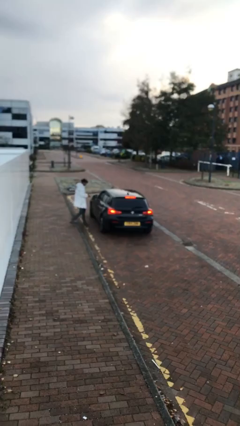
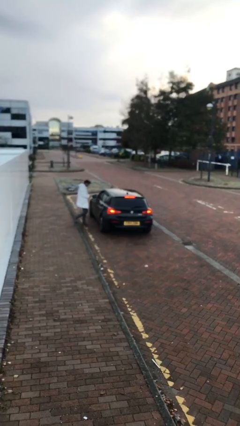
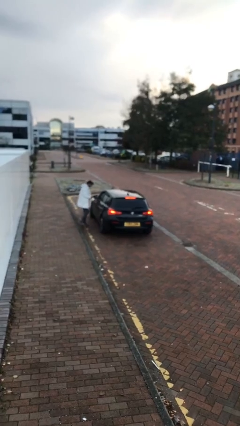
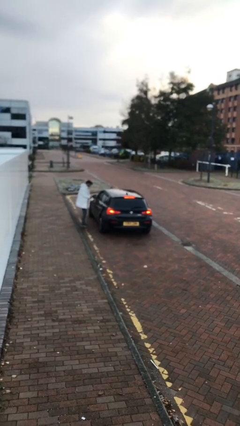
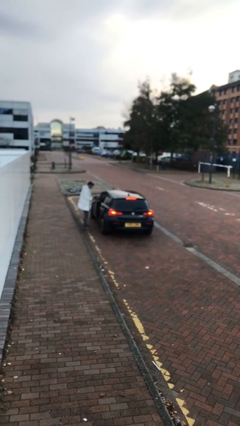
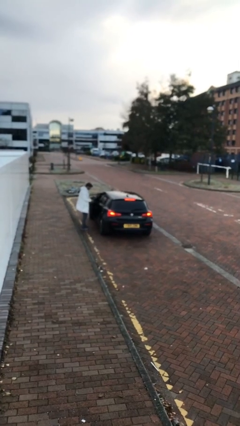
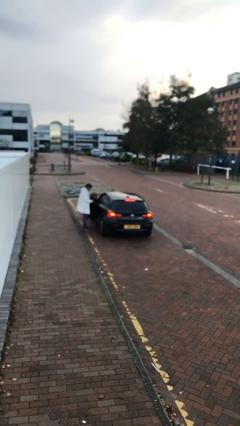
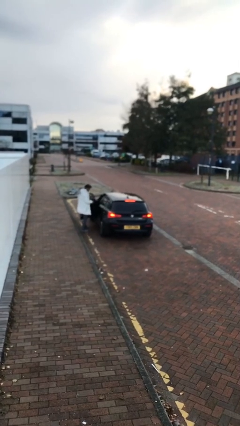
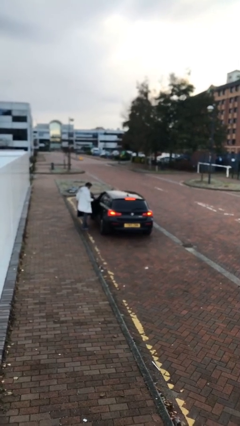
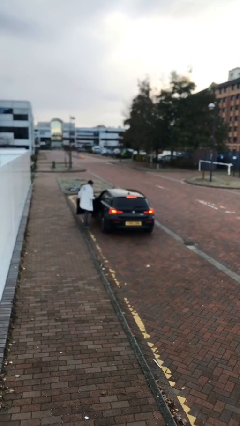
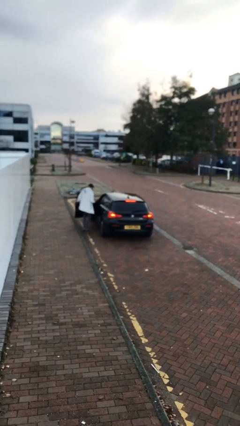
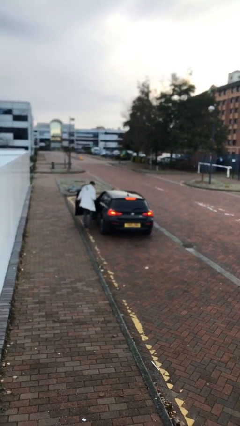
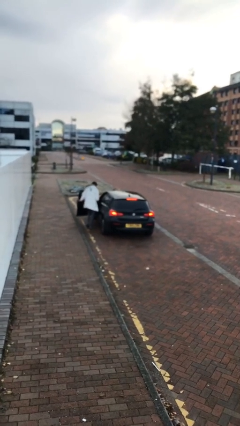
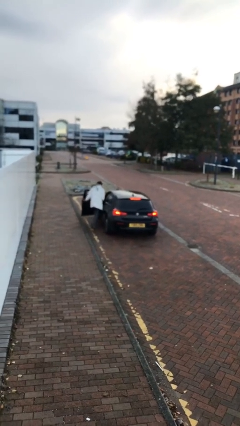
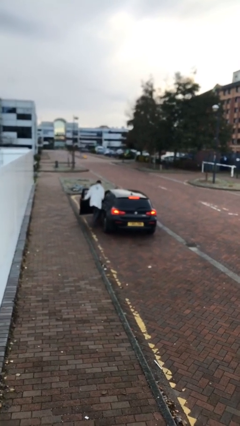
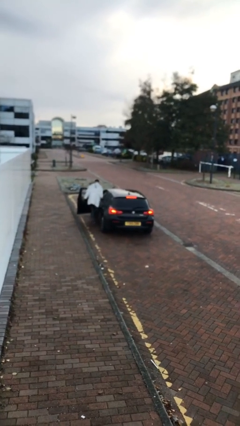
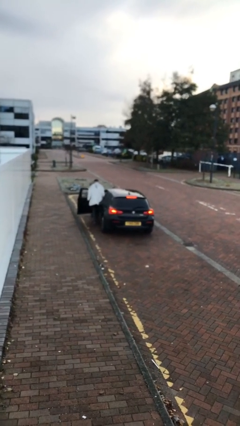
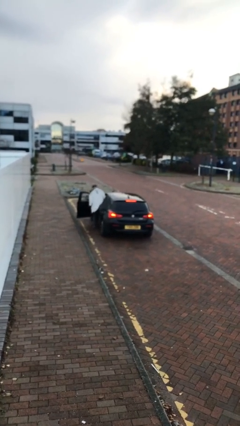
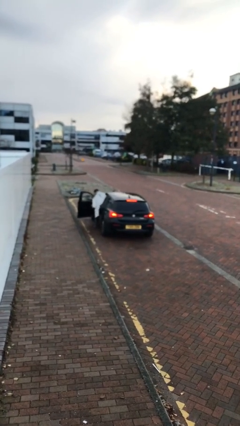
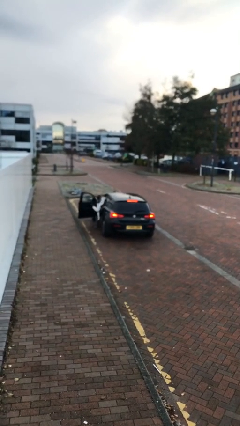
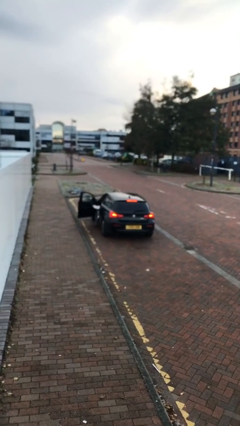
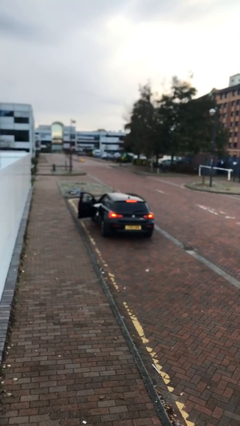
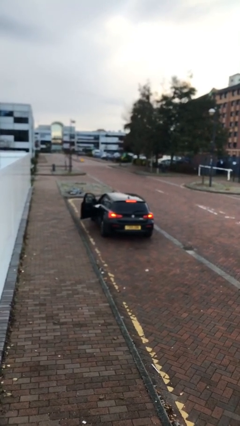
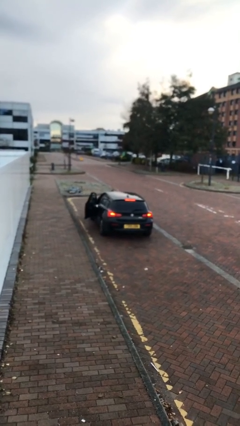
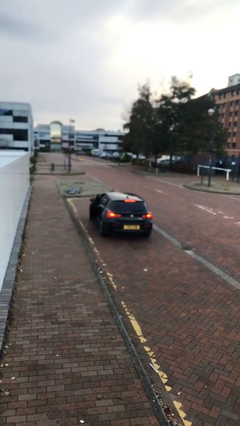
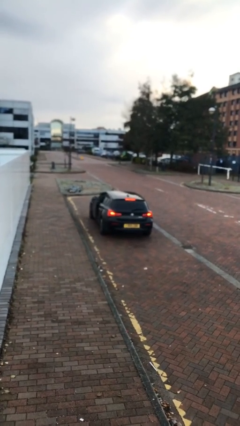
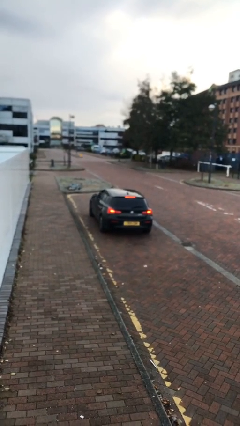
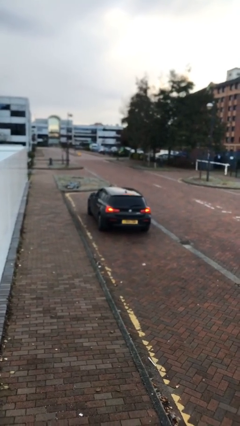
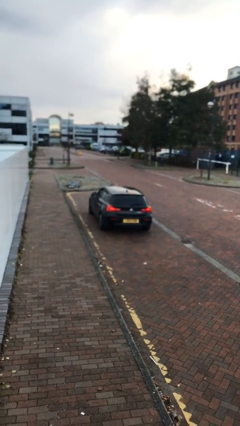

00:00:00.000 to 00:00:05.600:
car picks up person

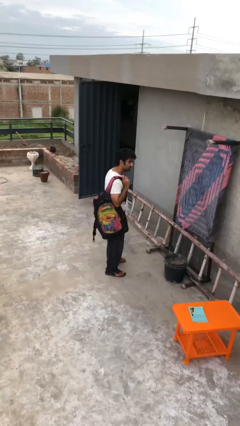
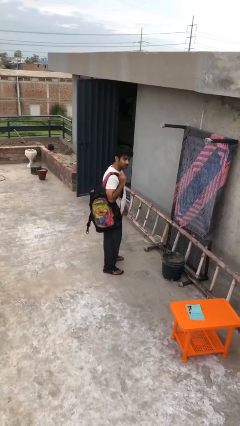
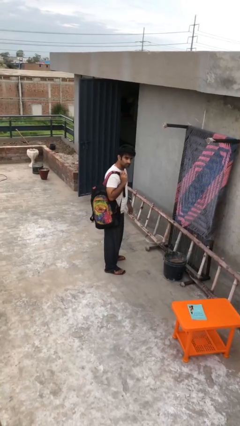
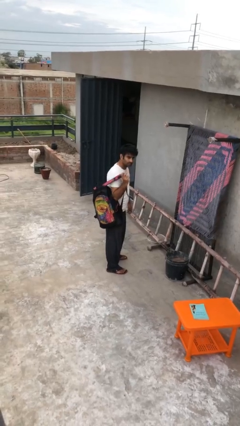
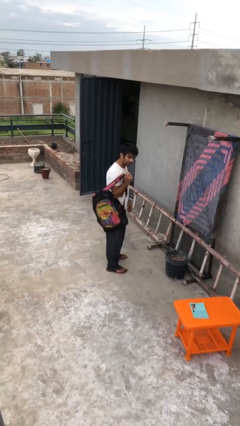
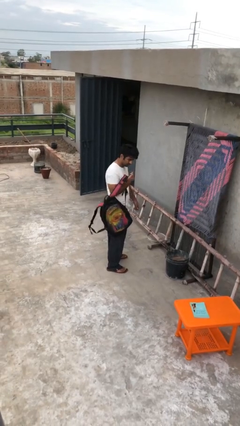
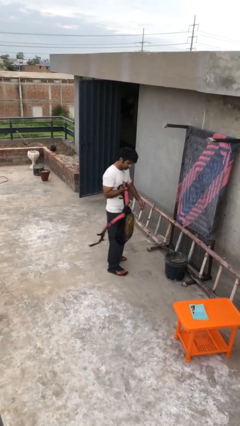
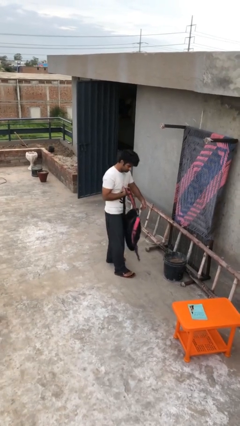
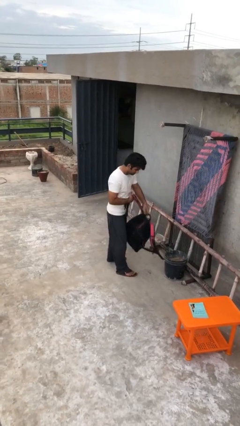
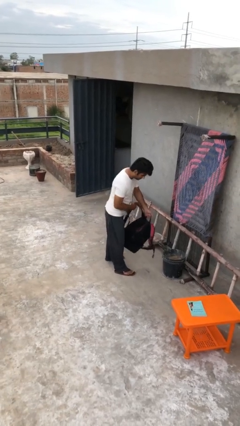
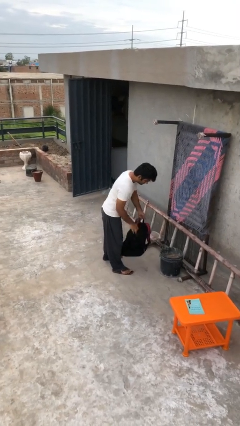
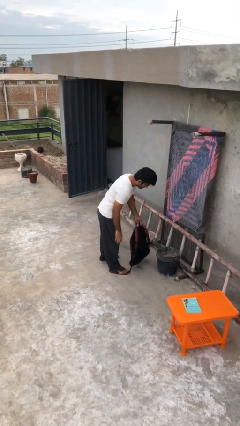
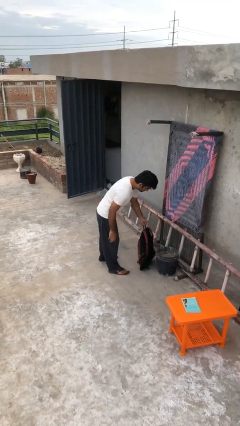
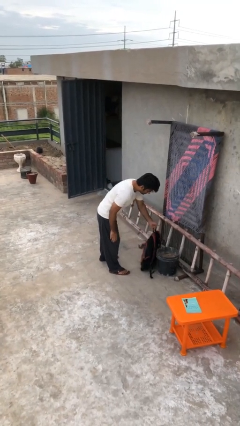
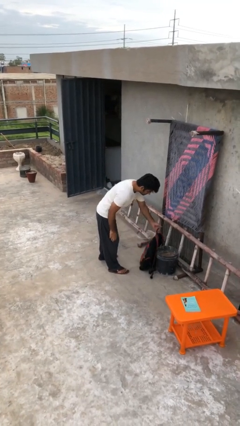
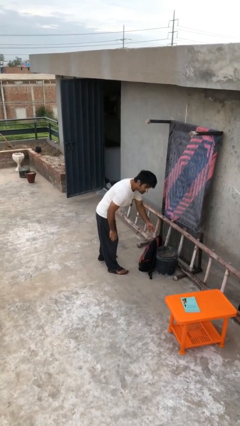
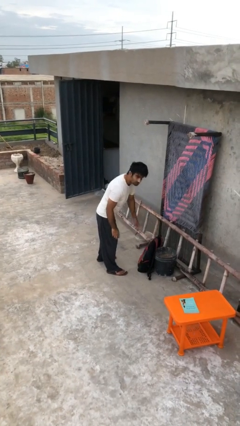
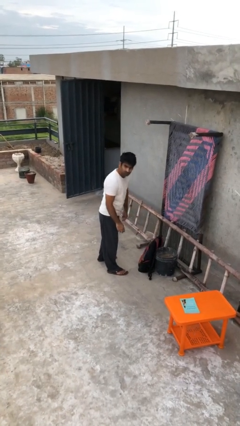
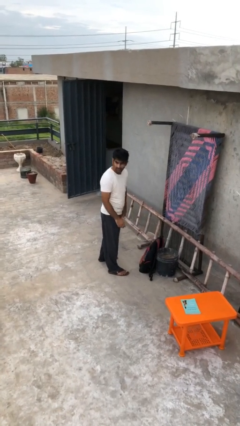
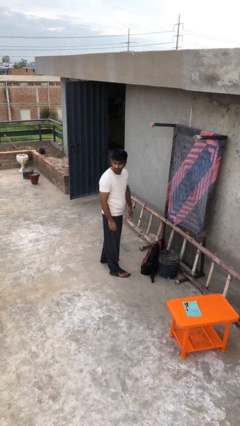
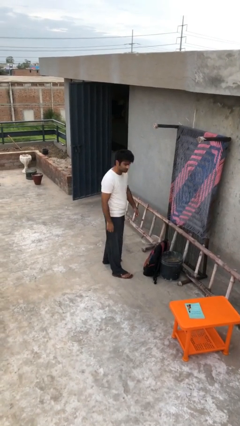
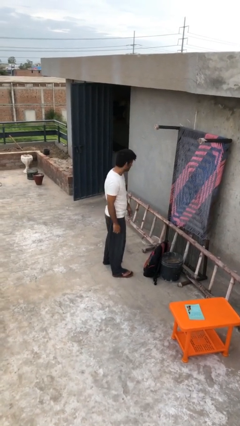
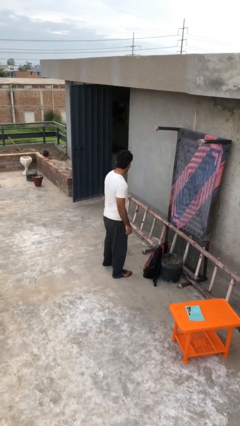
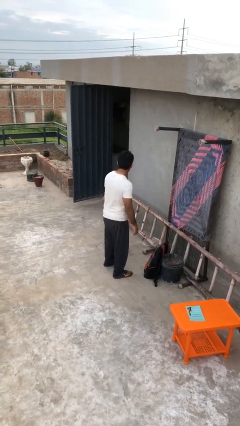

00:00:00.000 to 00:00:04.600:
person puts down object on floor

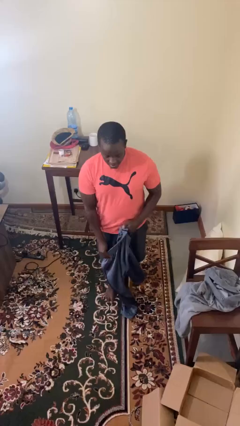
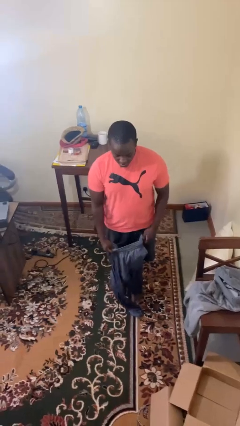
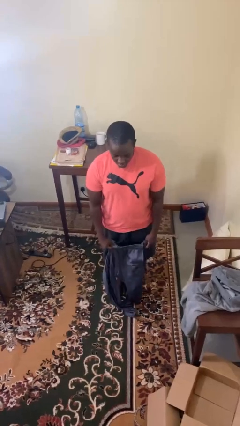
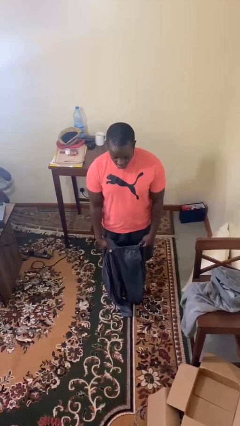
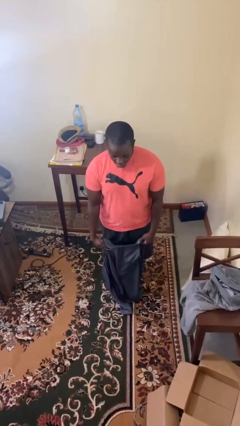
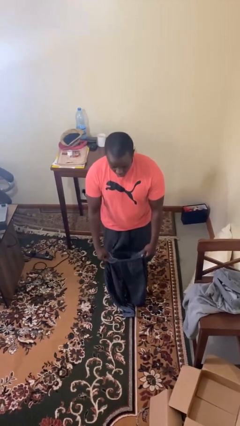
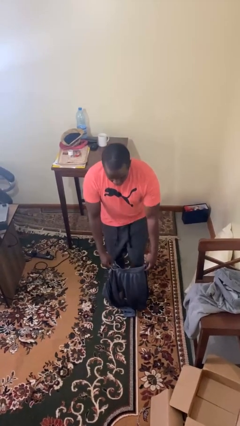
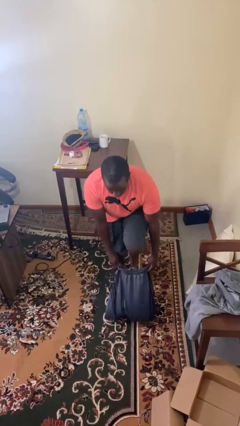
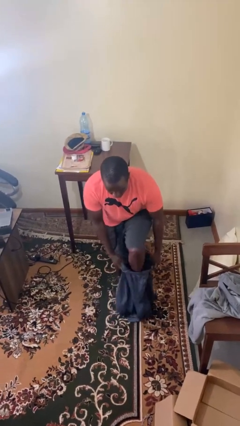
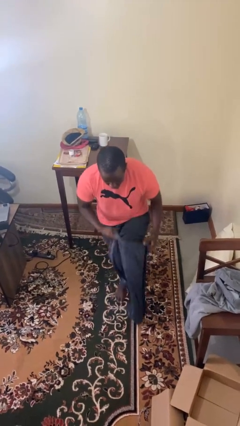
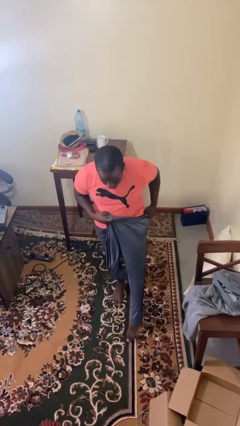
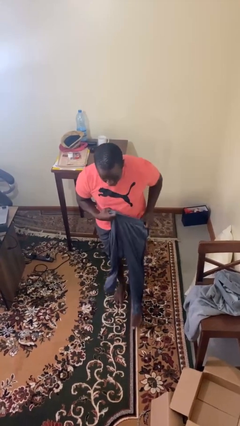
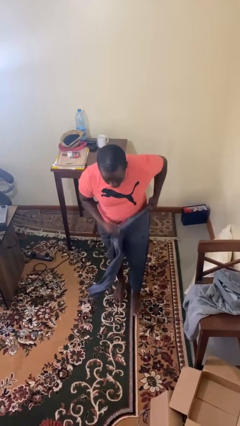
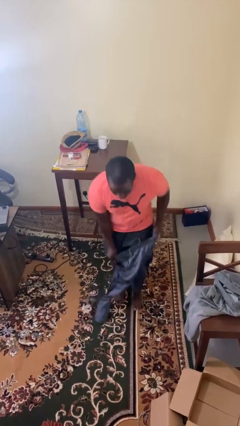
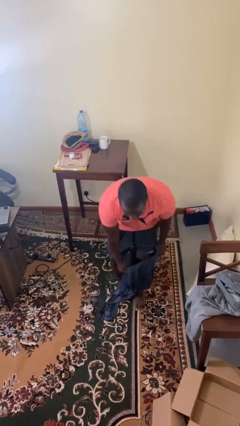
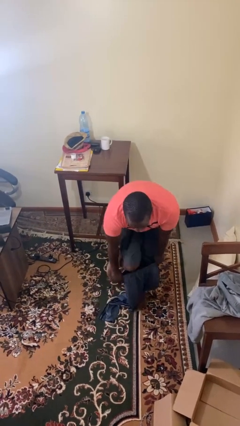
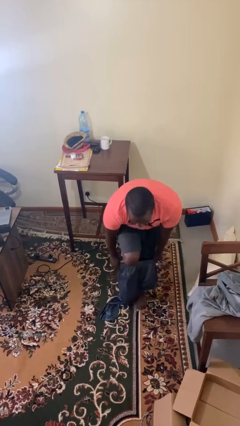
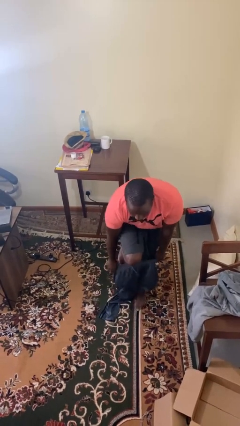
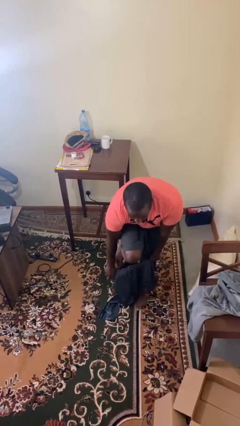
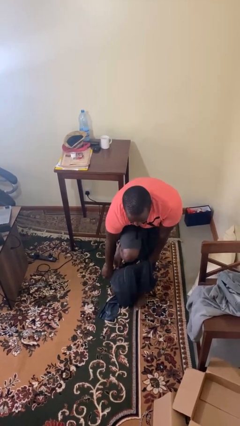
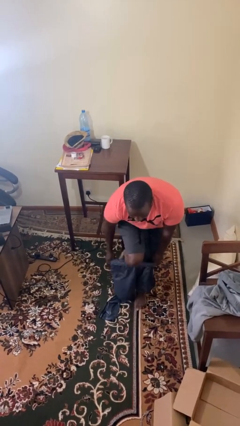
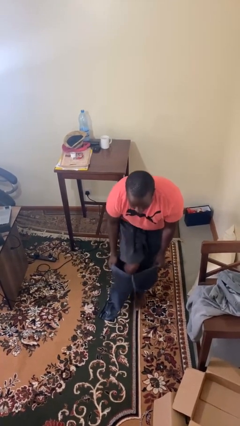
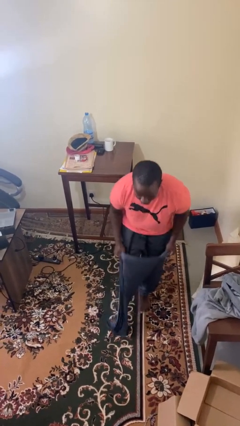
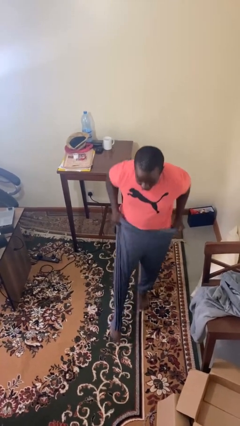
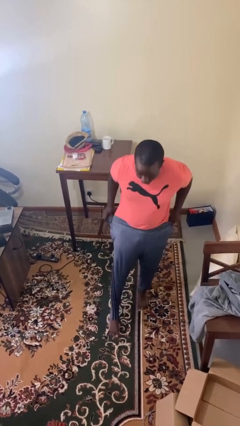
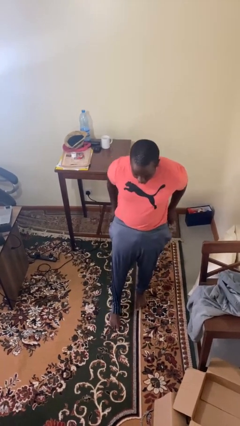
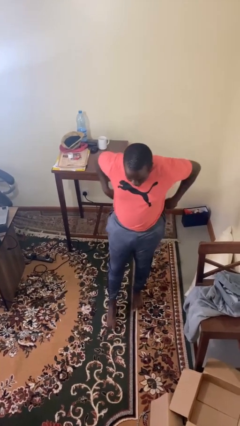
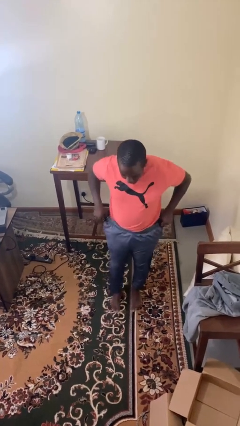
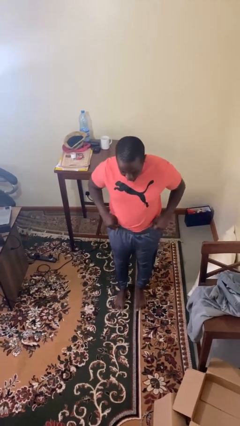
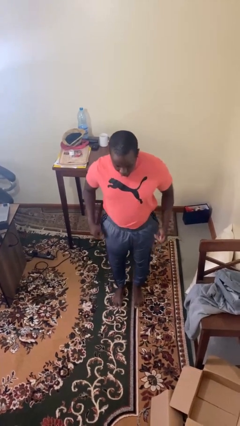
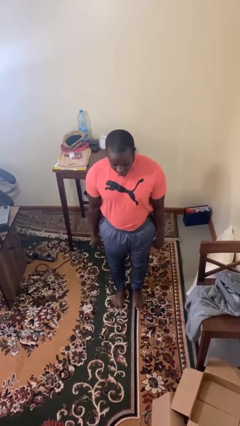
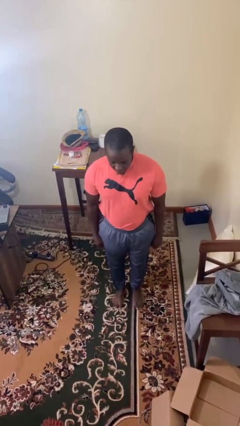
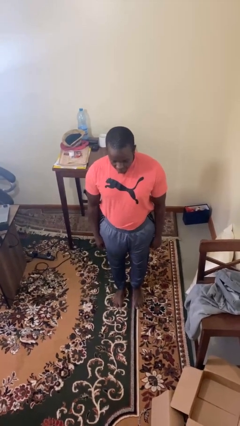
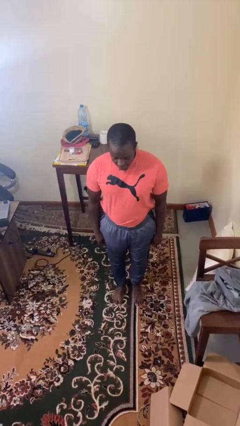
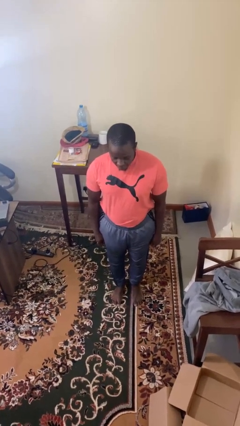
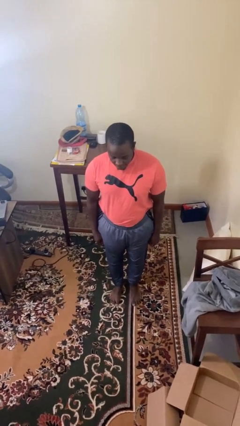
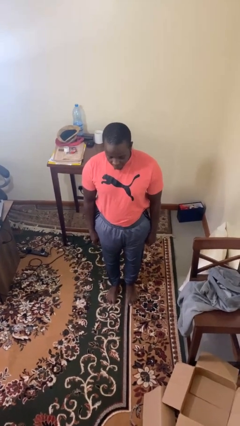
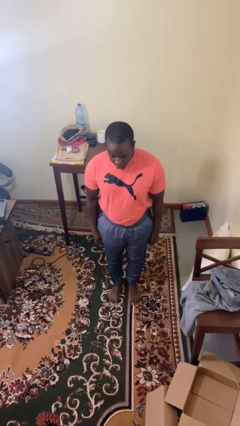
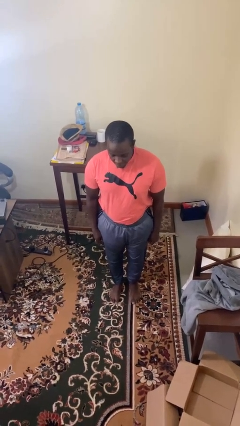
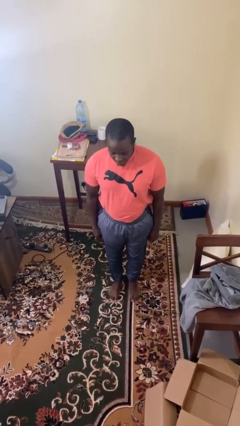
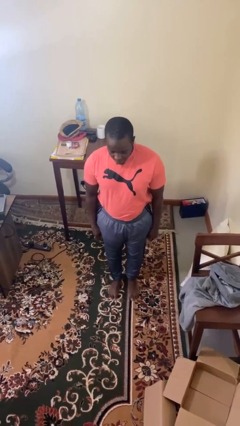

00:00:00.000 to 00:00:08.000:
person puts on pants
